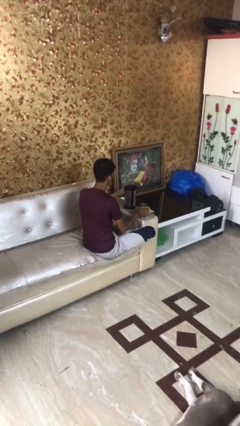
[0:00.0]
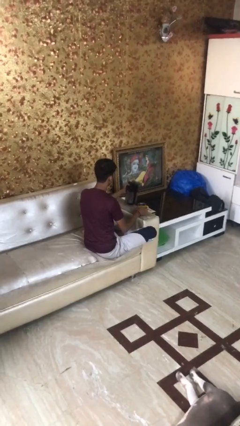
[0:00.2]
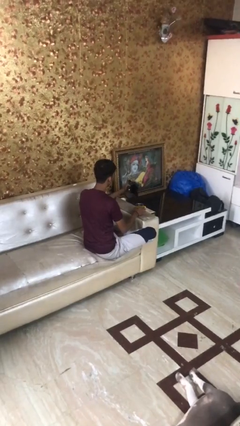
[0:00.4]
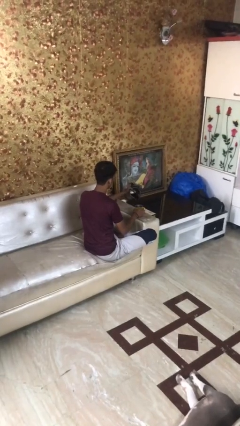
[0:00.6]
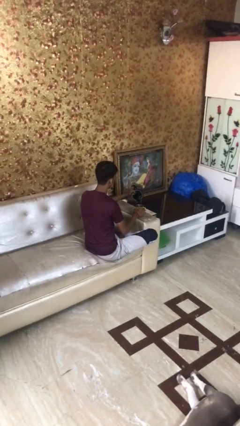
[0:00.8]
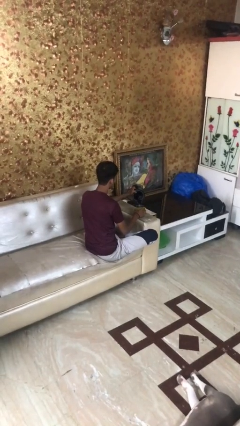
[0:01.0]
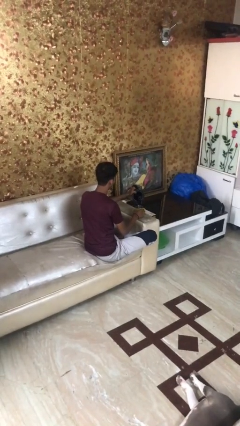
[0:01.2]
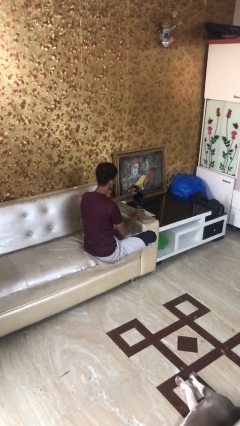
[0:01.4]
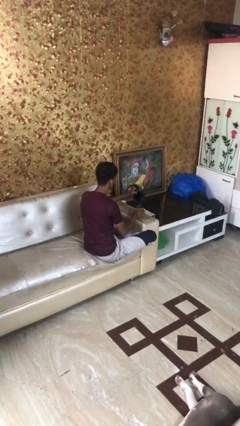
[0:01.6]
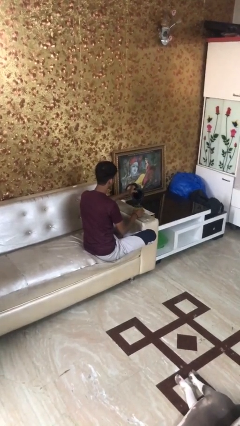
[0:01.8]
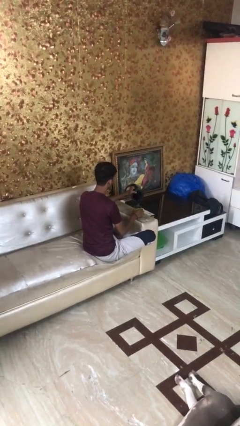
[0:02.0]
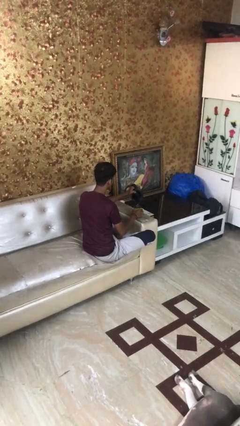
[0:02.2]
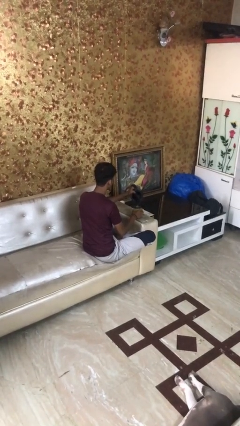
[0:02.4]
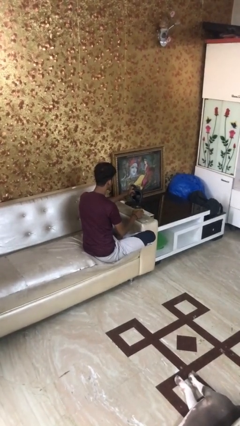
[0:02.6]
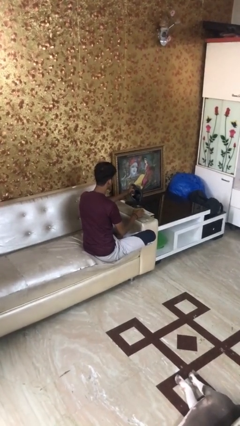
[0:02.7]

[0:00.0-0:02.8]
person pours coffee into mug

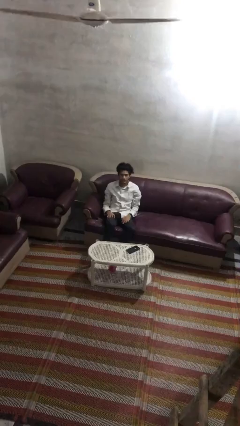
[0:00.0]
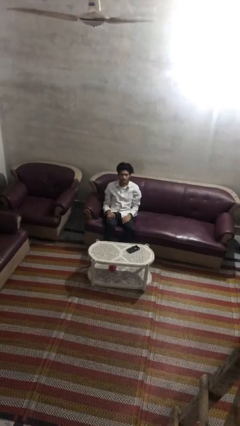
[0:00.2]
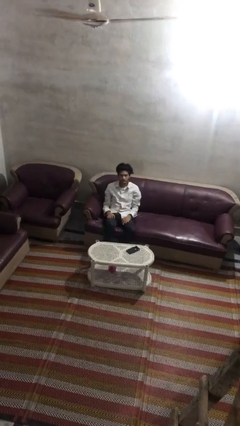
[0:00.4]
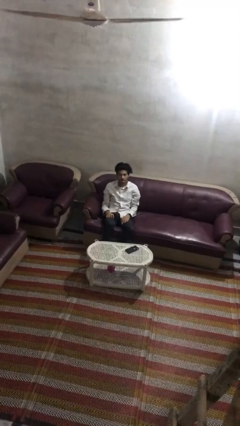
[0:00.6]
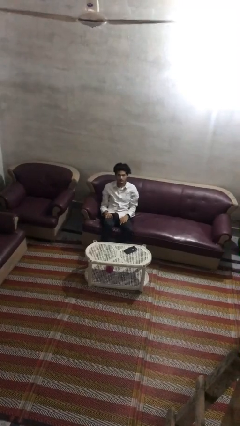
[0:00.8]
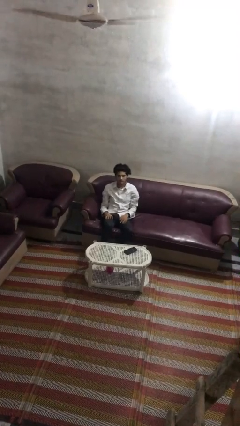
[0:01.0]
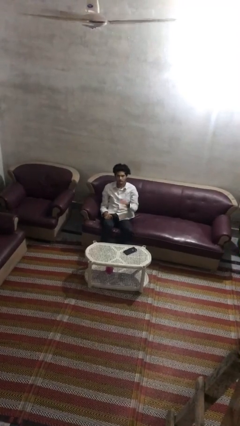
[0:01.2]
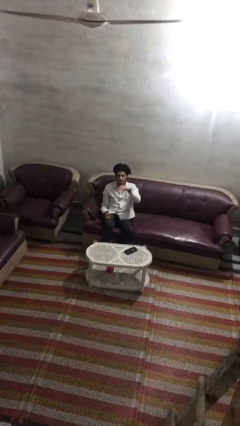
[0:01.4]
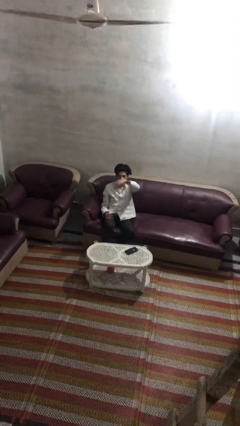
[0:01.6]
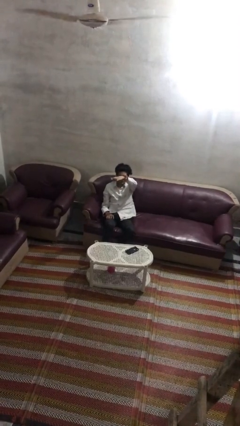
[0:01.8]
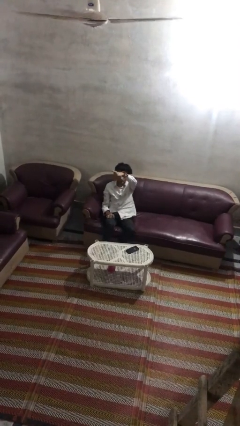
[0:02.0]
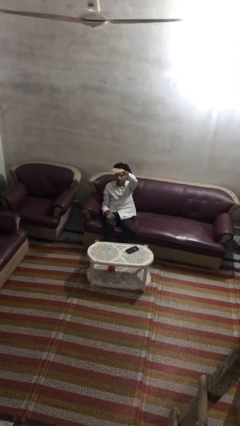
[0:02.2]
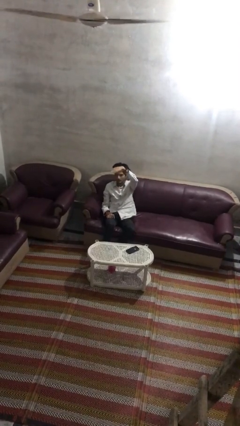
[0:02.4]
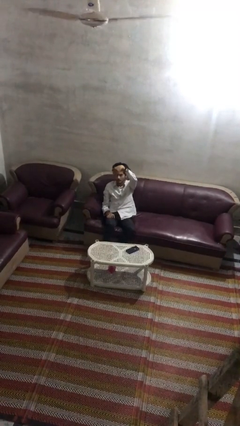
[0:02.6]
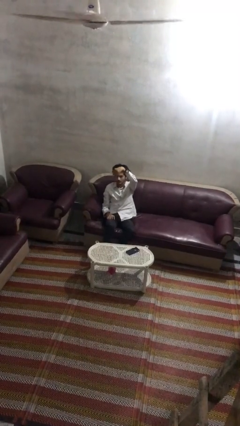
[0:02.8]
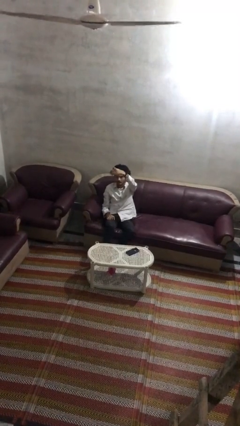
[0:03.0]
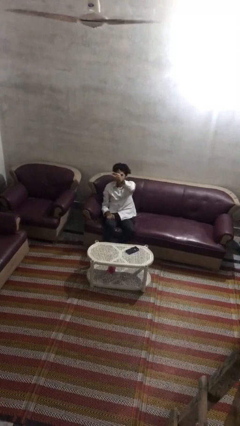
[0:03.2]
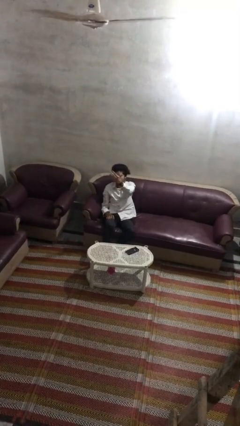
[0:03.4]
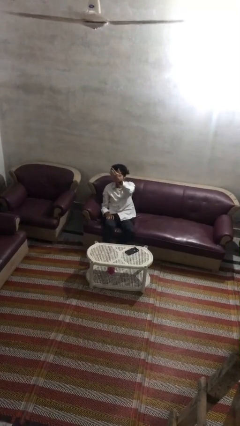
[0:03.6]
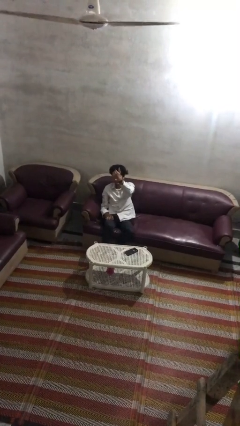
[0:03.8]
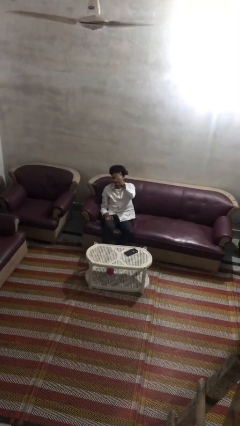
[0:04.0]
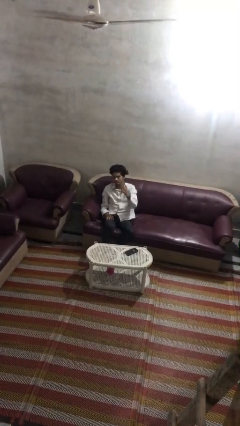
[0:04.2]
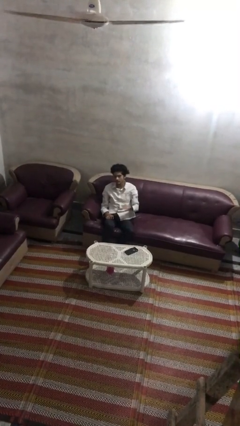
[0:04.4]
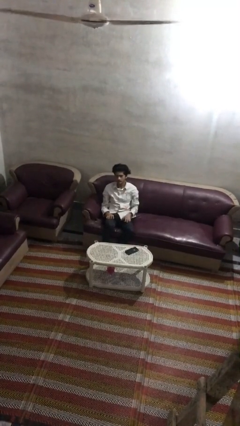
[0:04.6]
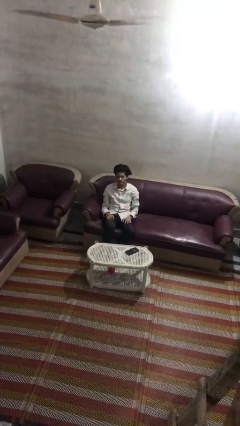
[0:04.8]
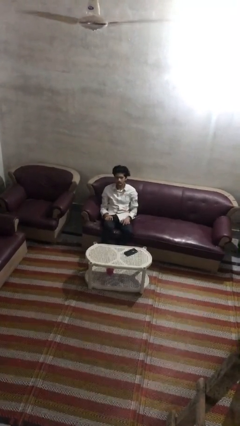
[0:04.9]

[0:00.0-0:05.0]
person gestures come here

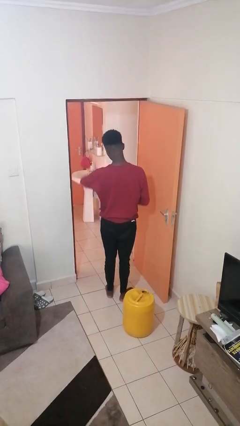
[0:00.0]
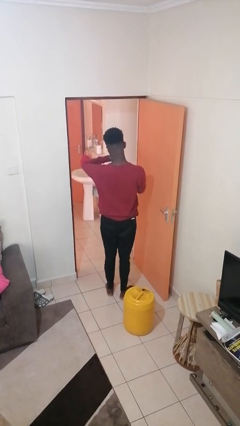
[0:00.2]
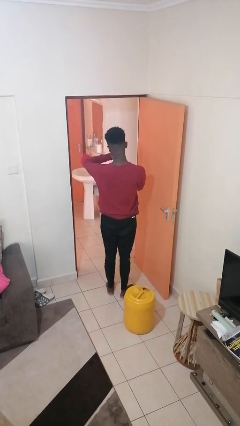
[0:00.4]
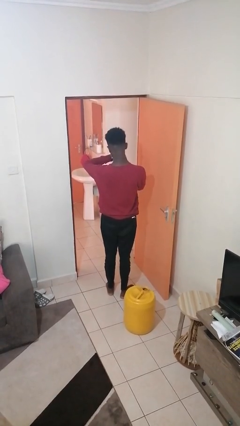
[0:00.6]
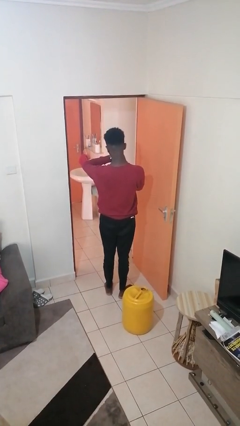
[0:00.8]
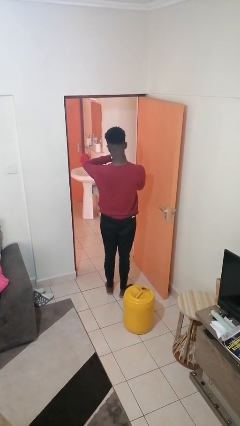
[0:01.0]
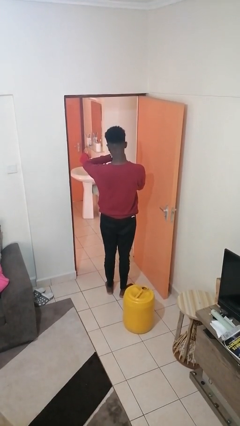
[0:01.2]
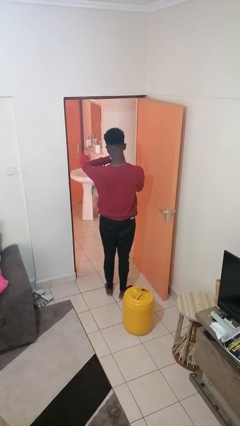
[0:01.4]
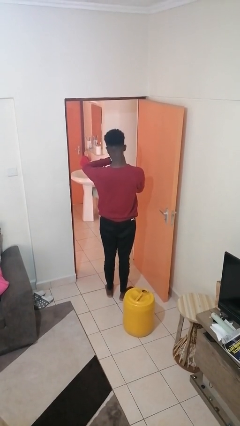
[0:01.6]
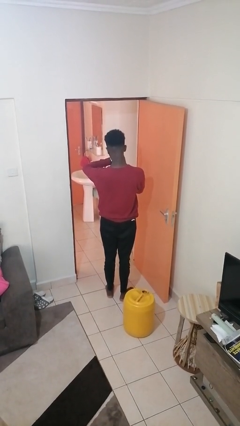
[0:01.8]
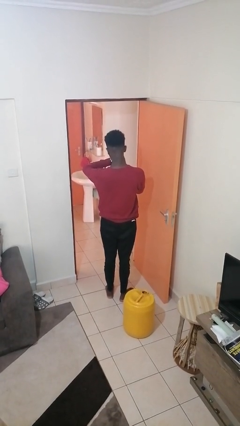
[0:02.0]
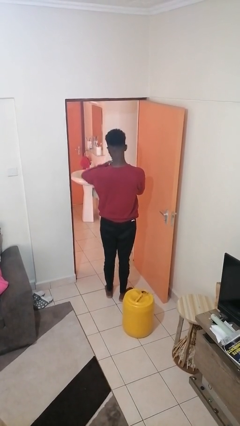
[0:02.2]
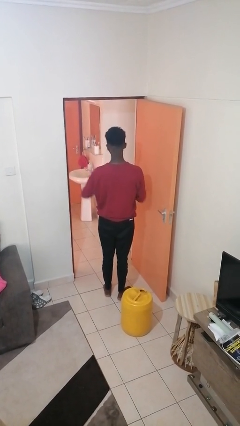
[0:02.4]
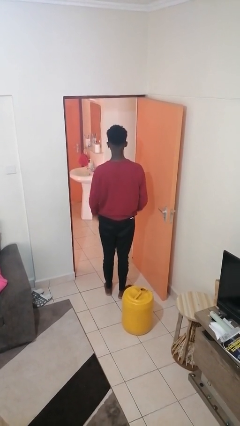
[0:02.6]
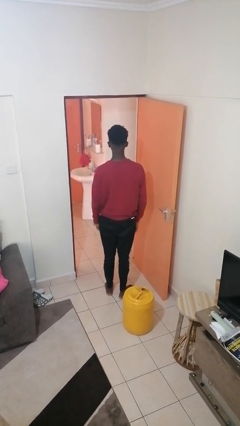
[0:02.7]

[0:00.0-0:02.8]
person looks at wristwatch

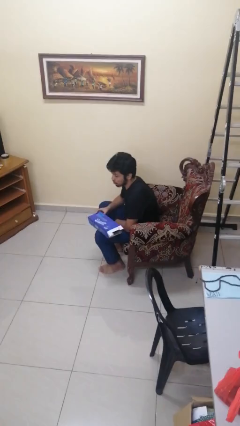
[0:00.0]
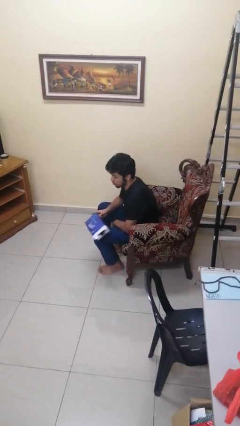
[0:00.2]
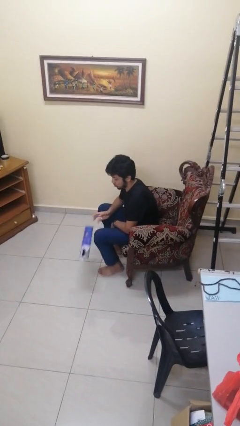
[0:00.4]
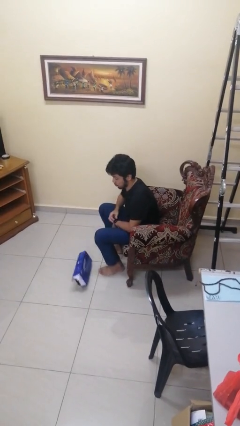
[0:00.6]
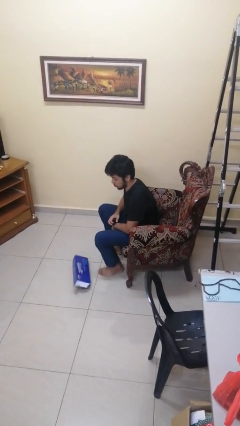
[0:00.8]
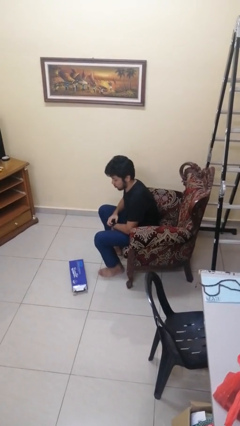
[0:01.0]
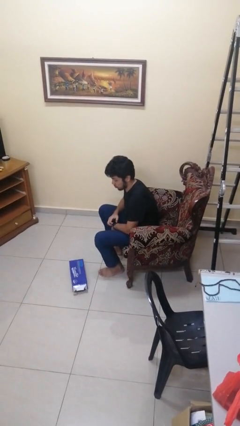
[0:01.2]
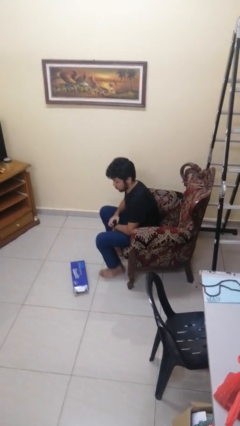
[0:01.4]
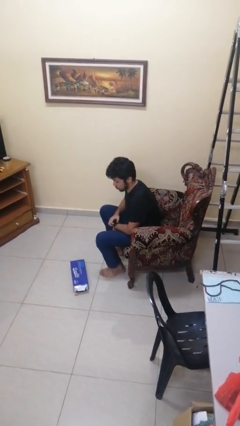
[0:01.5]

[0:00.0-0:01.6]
person drops object

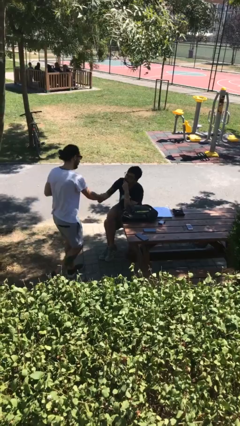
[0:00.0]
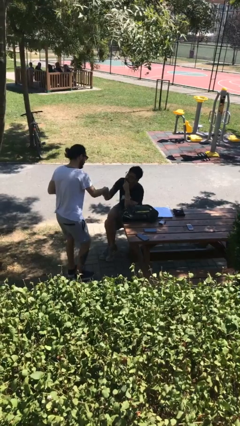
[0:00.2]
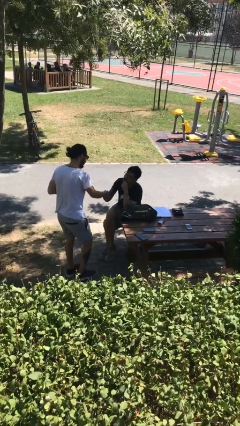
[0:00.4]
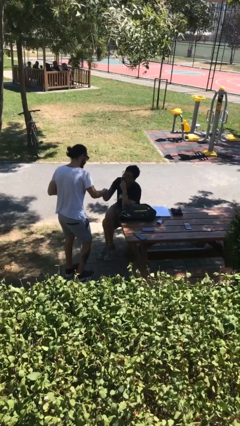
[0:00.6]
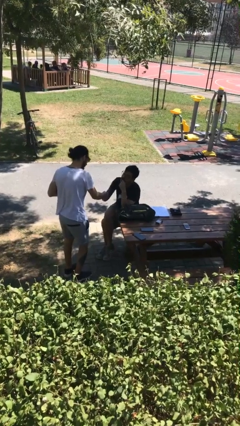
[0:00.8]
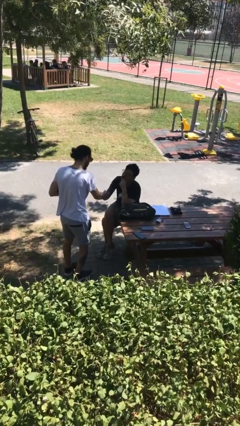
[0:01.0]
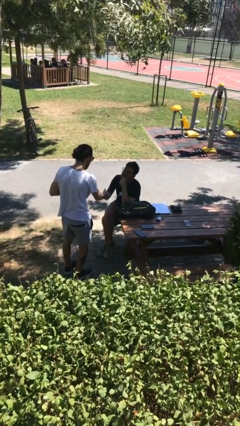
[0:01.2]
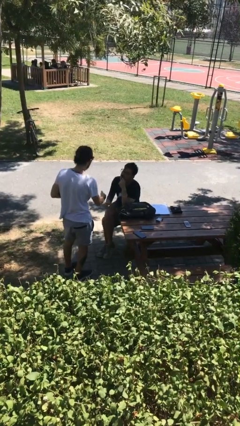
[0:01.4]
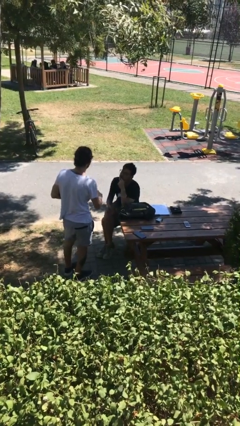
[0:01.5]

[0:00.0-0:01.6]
person shakes hand

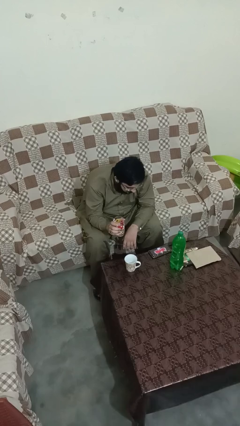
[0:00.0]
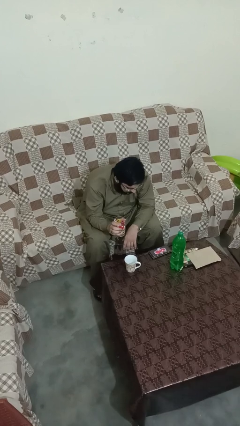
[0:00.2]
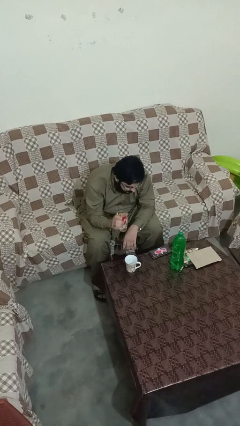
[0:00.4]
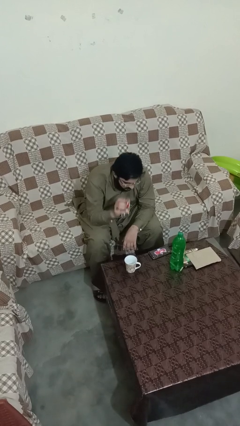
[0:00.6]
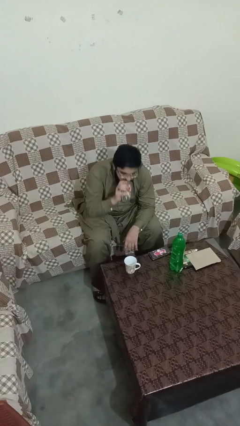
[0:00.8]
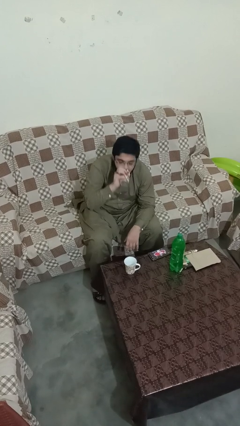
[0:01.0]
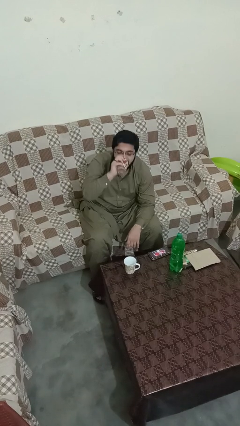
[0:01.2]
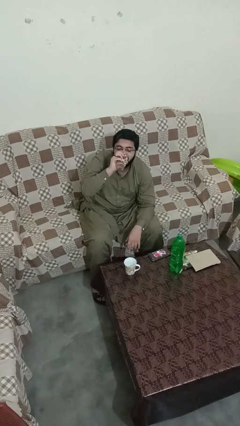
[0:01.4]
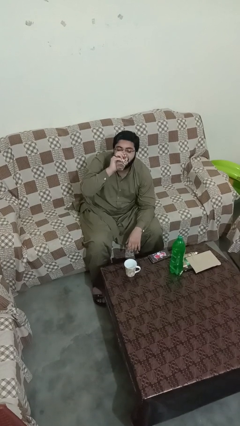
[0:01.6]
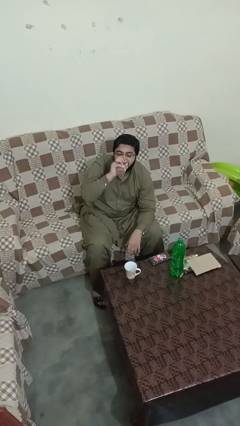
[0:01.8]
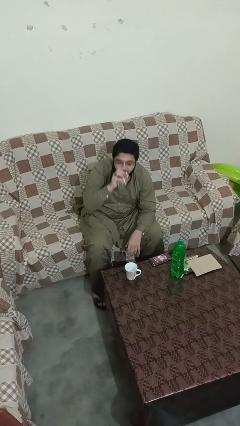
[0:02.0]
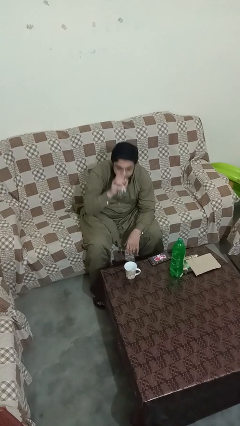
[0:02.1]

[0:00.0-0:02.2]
person drinks from shotglass

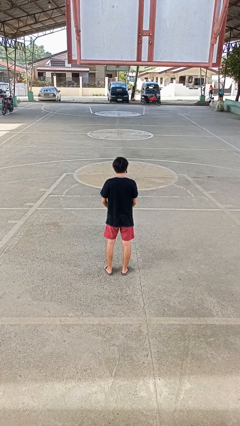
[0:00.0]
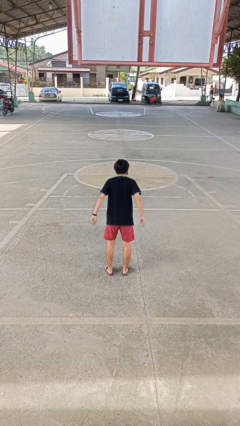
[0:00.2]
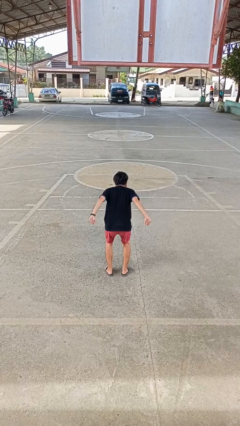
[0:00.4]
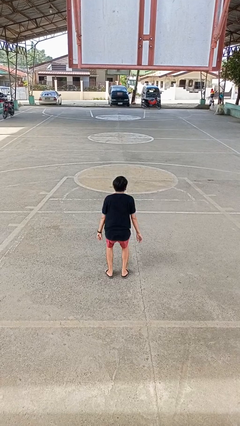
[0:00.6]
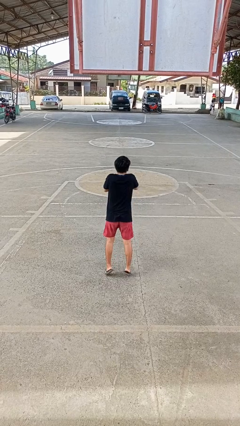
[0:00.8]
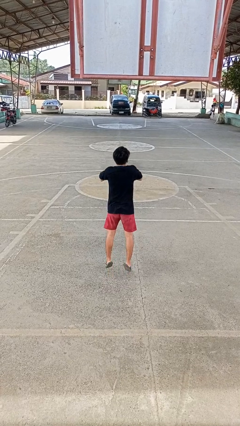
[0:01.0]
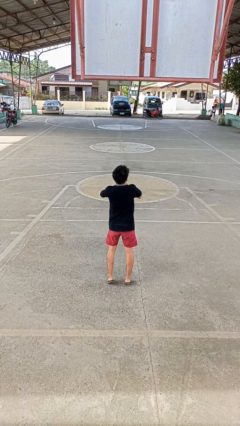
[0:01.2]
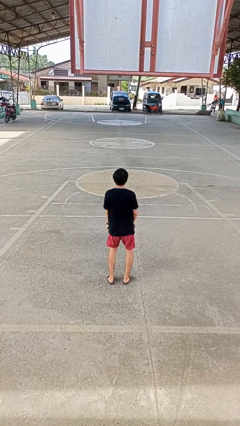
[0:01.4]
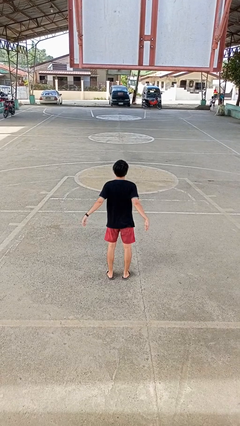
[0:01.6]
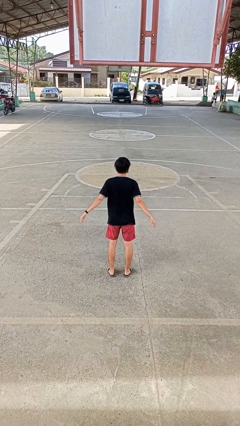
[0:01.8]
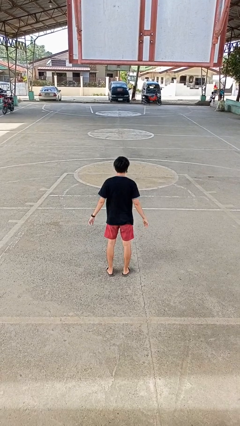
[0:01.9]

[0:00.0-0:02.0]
person jumps
